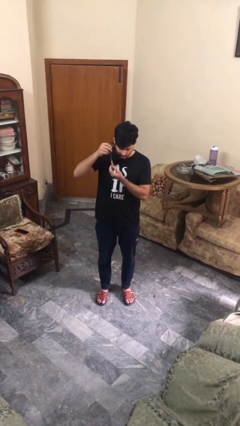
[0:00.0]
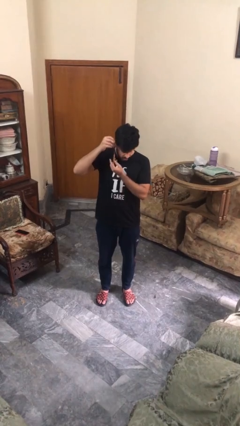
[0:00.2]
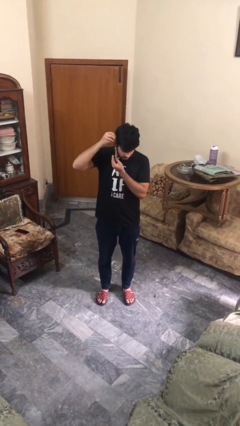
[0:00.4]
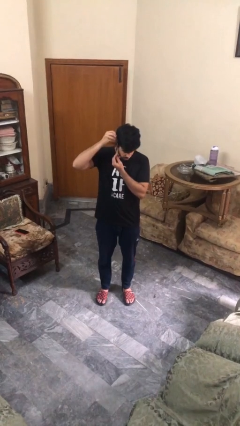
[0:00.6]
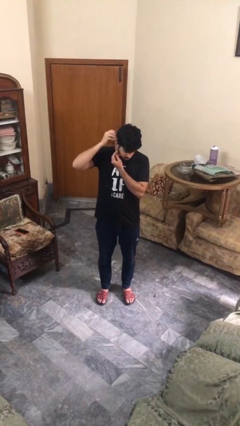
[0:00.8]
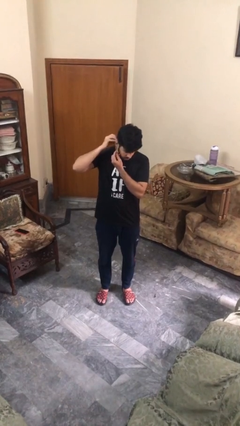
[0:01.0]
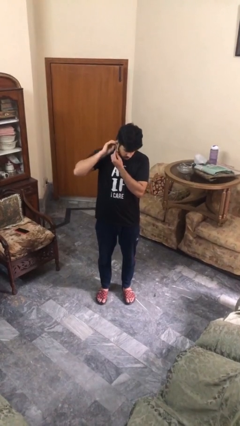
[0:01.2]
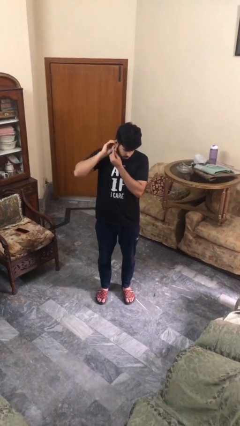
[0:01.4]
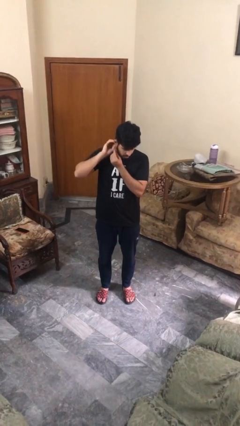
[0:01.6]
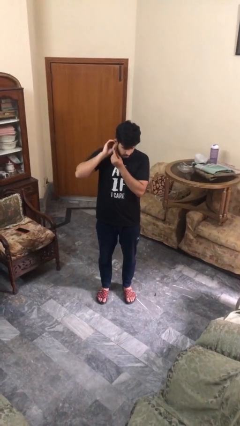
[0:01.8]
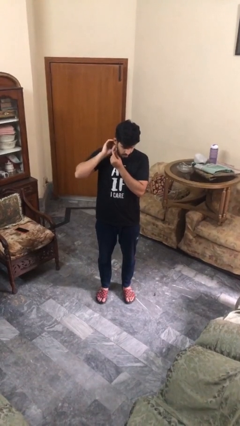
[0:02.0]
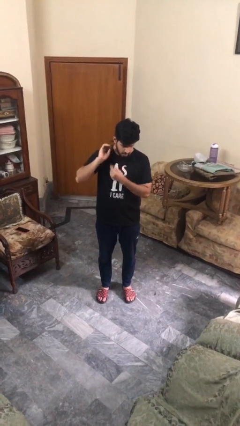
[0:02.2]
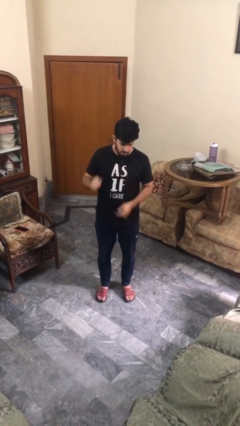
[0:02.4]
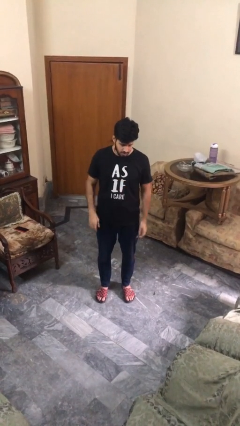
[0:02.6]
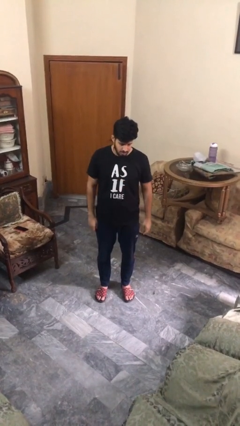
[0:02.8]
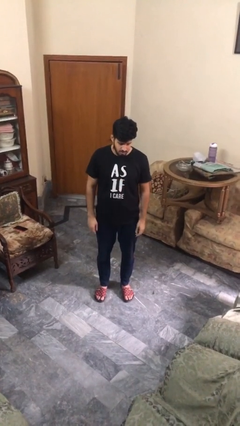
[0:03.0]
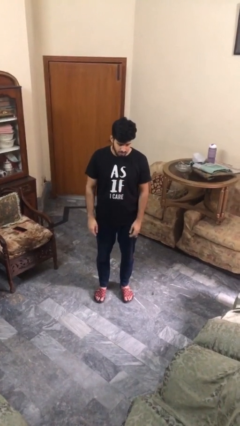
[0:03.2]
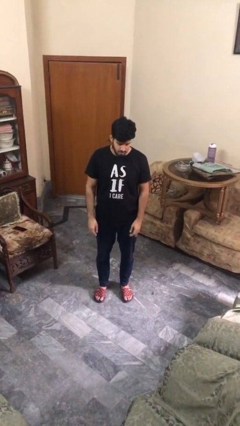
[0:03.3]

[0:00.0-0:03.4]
person puts on earrings

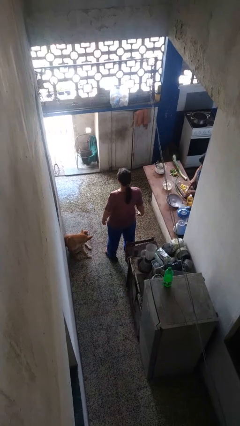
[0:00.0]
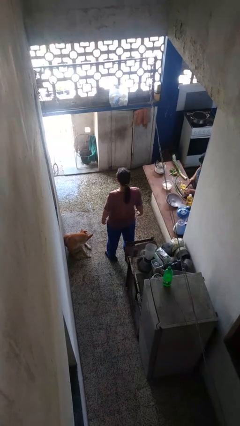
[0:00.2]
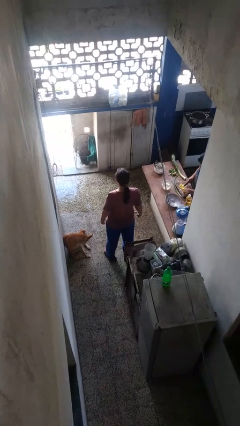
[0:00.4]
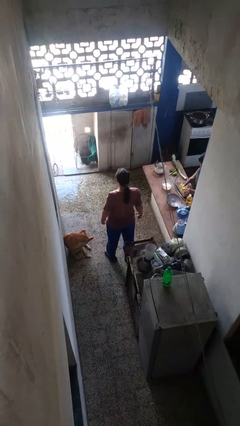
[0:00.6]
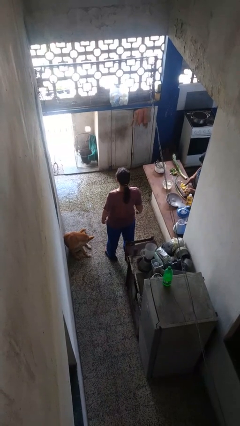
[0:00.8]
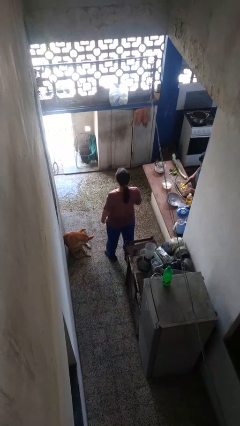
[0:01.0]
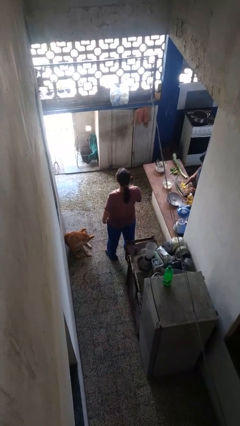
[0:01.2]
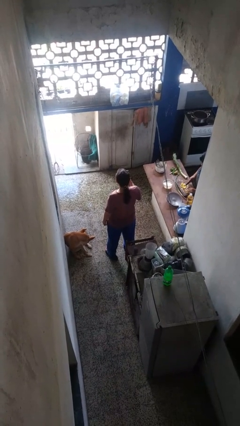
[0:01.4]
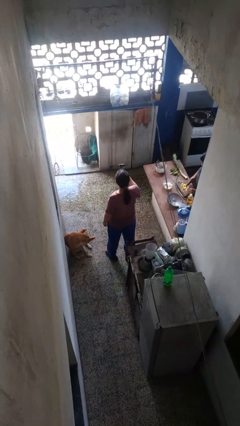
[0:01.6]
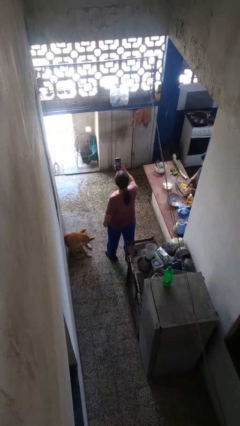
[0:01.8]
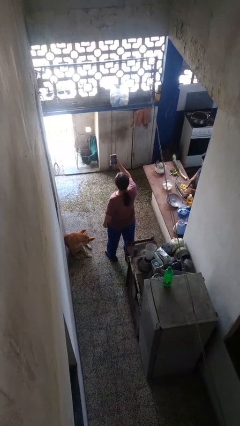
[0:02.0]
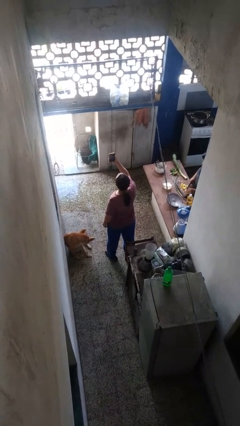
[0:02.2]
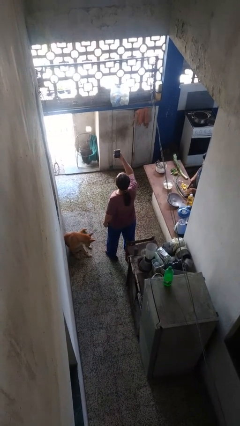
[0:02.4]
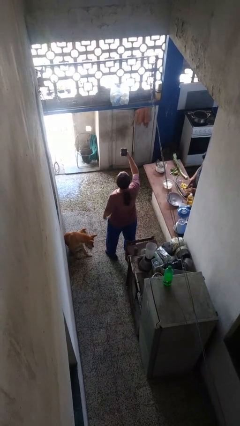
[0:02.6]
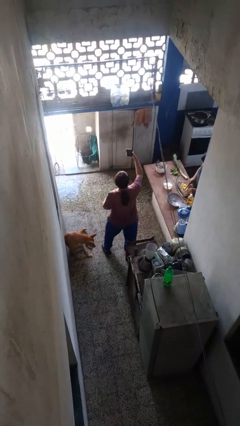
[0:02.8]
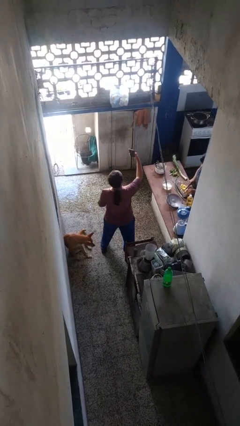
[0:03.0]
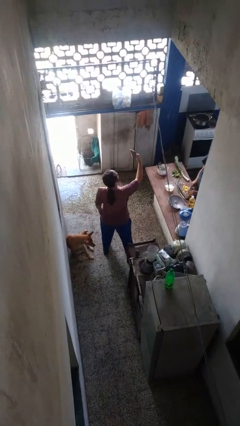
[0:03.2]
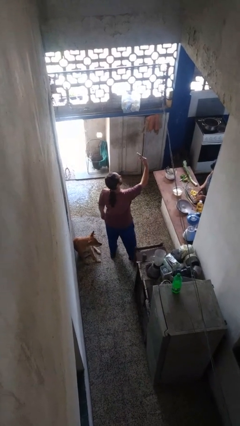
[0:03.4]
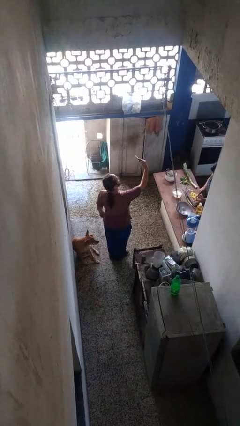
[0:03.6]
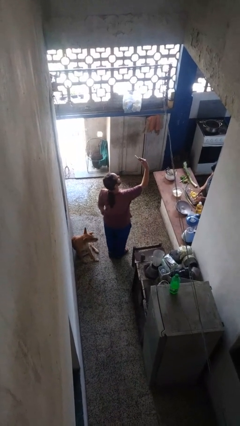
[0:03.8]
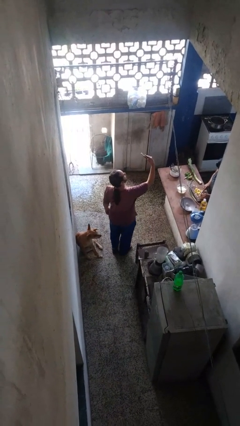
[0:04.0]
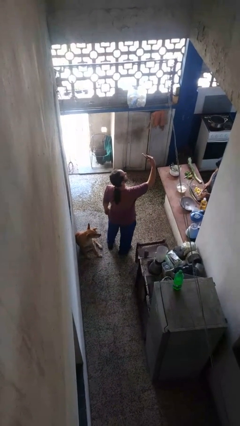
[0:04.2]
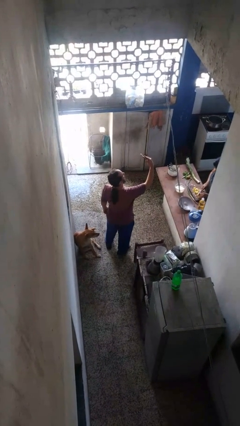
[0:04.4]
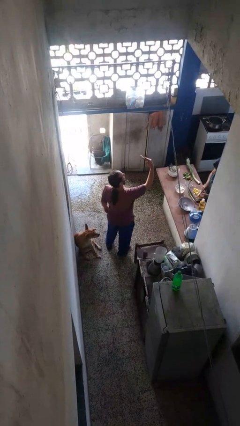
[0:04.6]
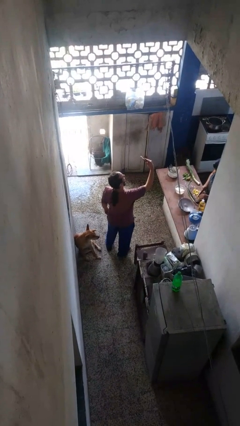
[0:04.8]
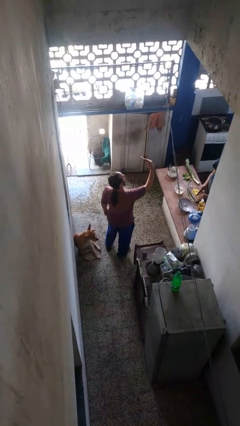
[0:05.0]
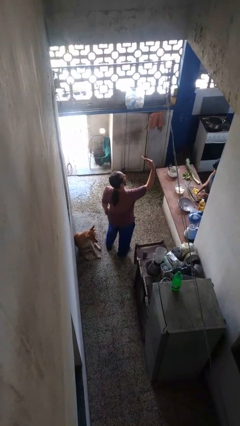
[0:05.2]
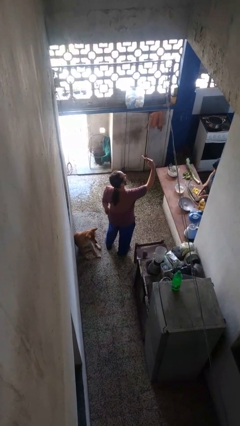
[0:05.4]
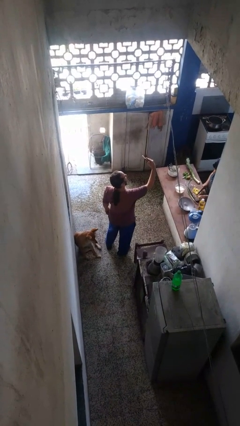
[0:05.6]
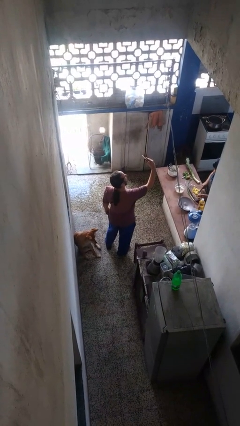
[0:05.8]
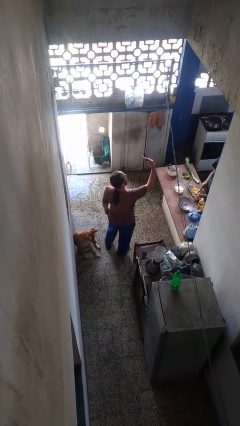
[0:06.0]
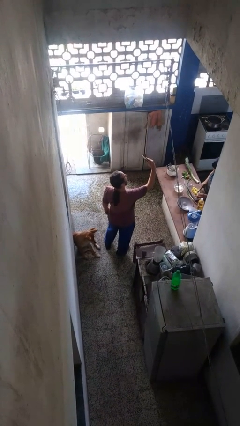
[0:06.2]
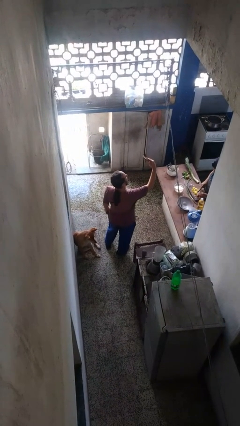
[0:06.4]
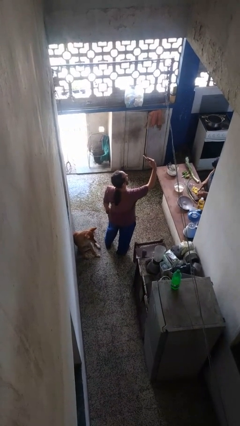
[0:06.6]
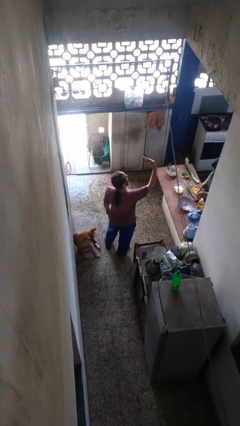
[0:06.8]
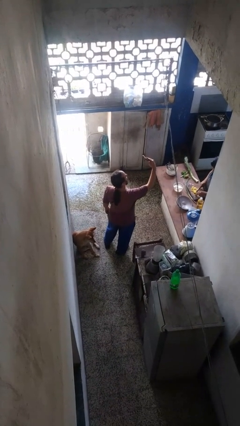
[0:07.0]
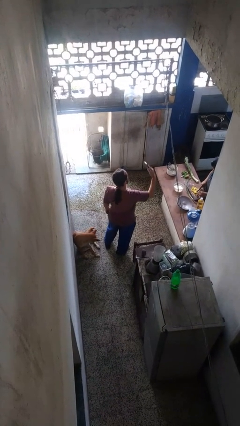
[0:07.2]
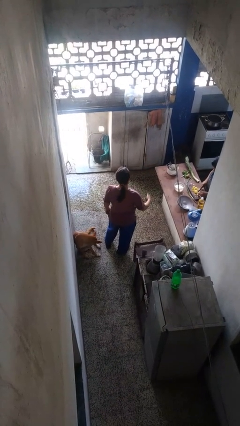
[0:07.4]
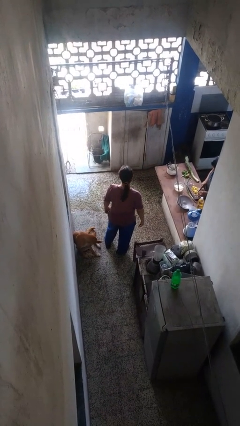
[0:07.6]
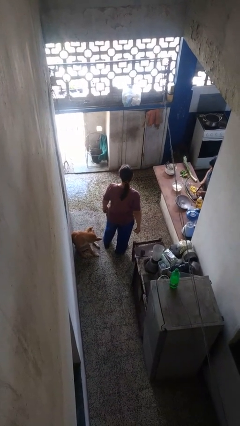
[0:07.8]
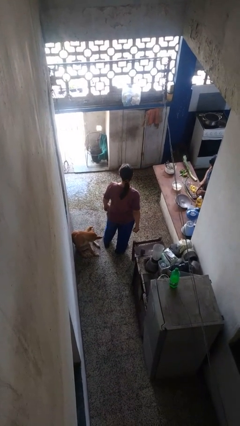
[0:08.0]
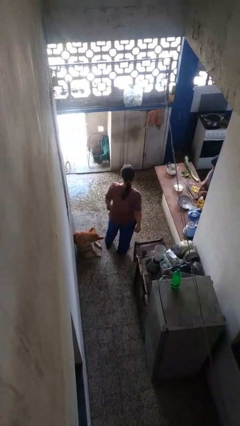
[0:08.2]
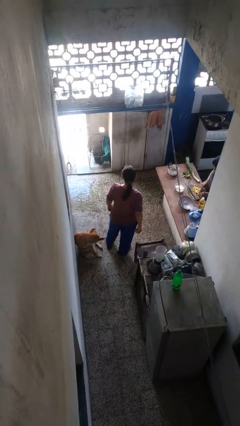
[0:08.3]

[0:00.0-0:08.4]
person takes selfie

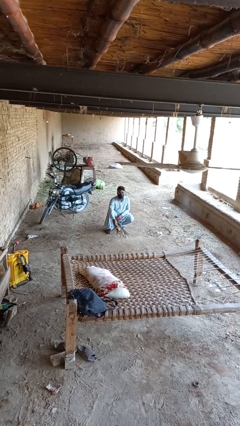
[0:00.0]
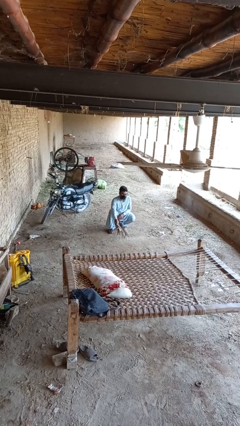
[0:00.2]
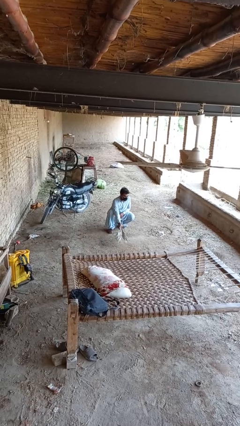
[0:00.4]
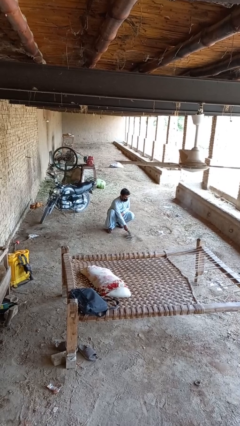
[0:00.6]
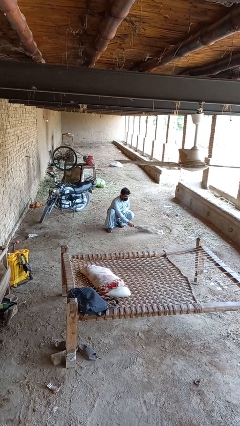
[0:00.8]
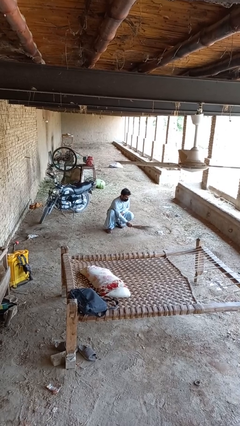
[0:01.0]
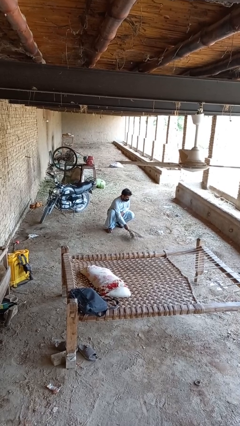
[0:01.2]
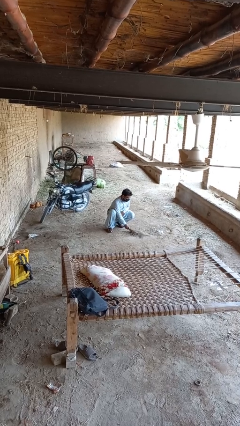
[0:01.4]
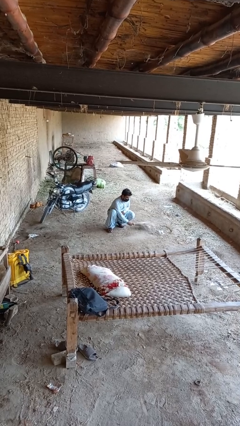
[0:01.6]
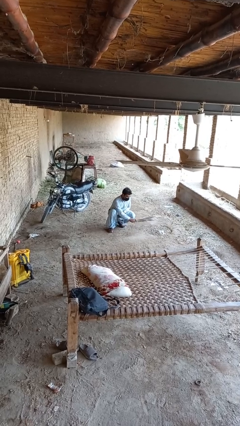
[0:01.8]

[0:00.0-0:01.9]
person sweeps floor

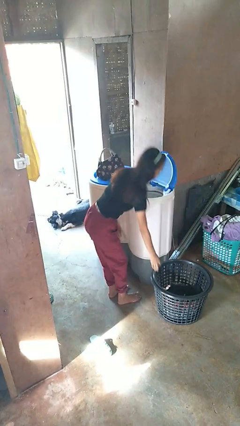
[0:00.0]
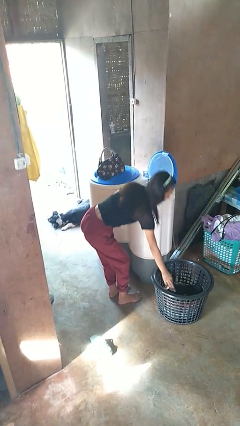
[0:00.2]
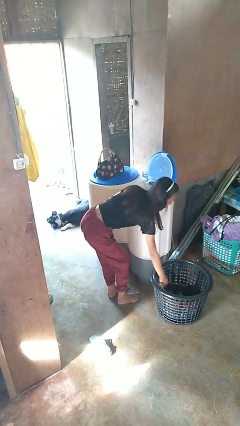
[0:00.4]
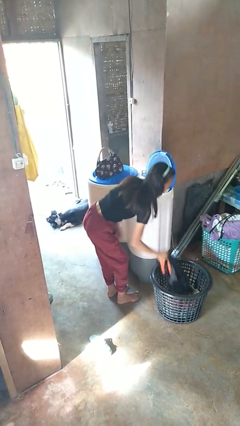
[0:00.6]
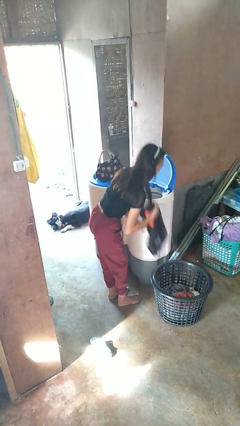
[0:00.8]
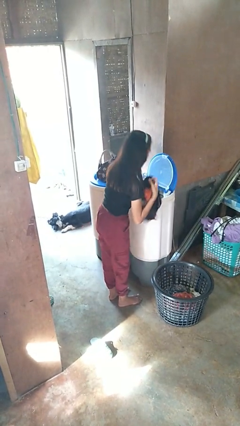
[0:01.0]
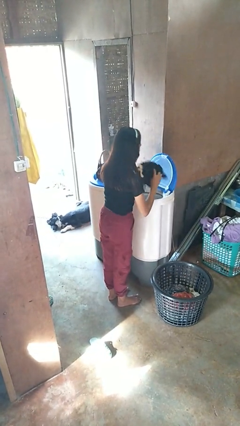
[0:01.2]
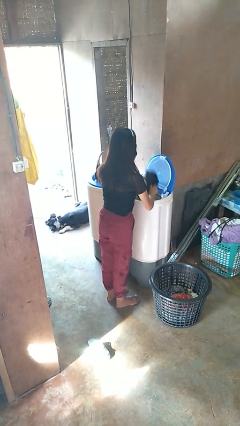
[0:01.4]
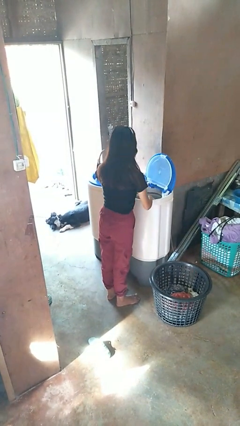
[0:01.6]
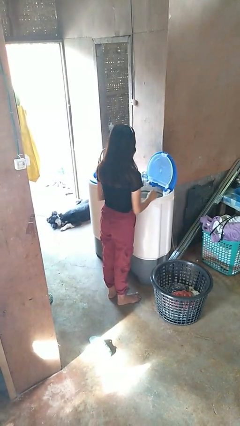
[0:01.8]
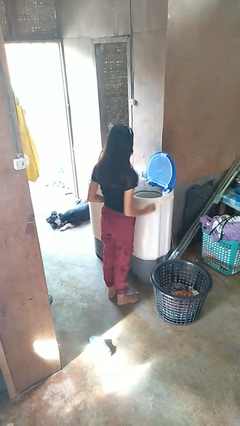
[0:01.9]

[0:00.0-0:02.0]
person loads clotheswasher

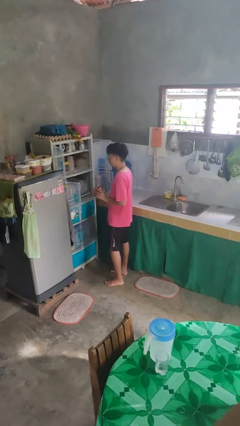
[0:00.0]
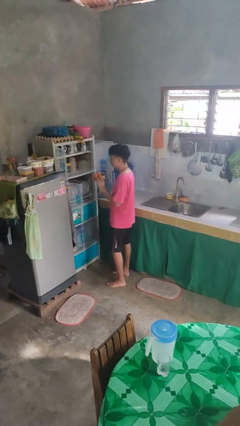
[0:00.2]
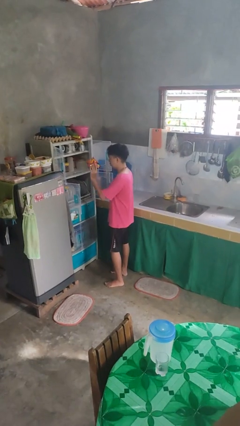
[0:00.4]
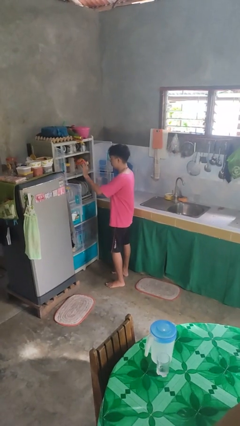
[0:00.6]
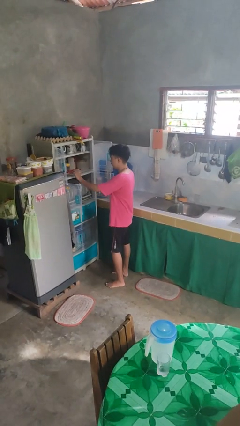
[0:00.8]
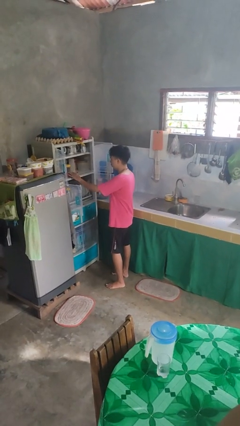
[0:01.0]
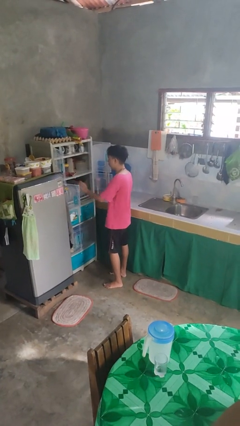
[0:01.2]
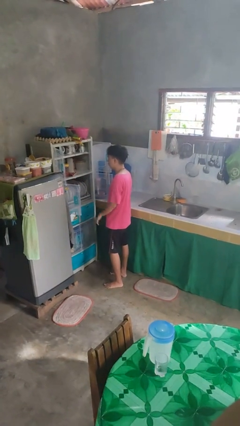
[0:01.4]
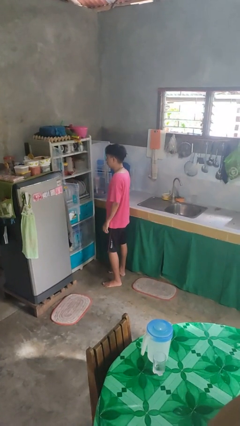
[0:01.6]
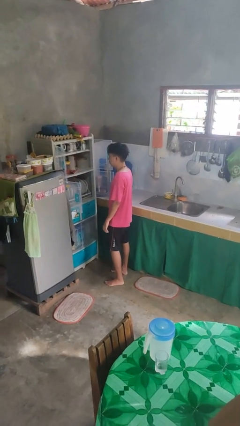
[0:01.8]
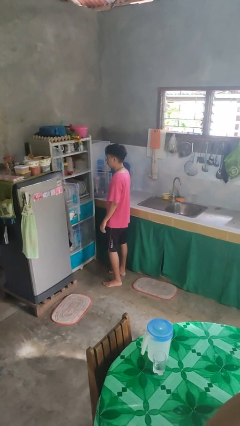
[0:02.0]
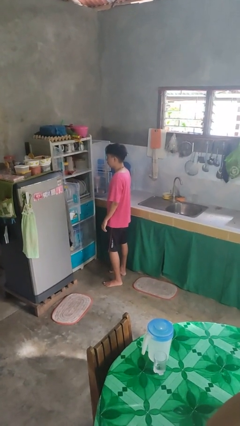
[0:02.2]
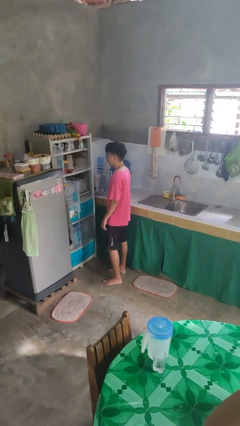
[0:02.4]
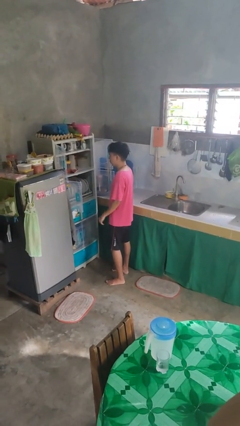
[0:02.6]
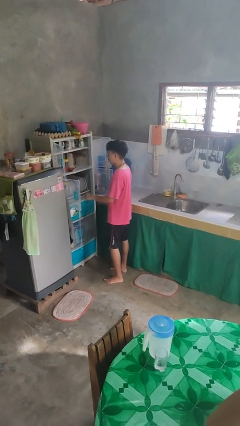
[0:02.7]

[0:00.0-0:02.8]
person puts object in cabinet
